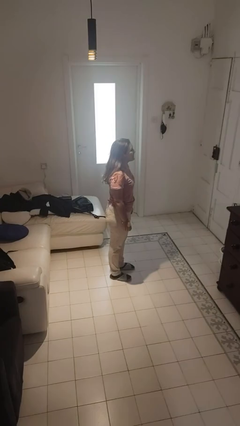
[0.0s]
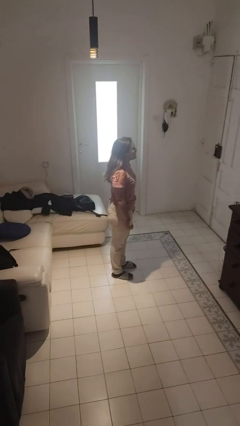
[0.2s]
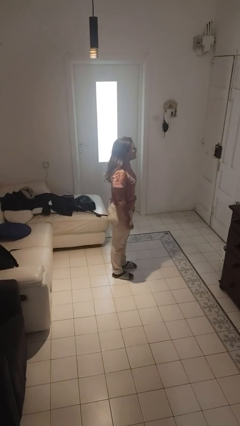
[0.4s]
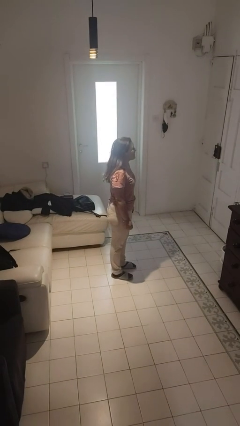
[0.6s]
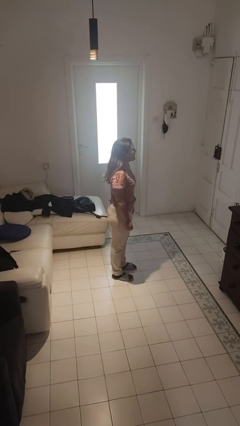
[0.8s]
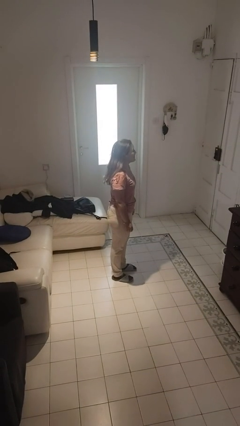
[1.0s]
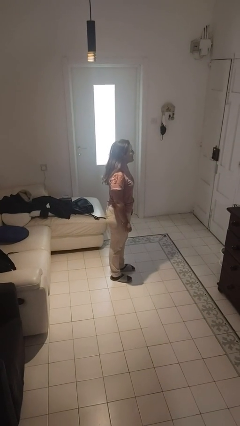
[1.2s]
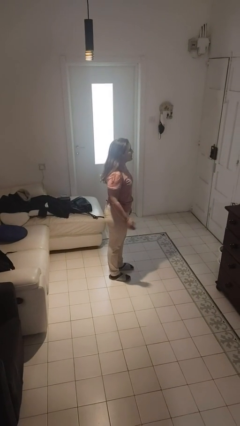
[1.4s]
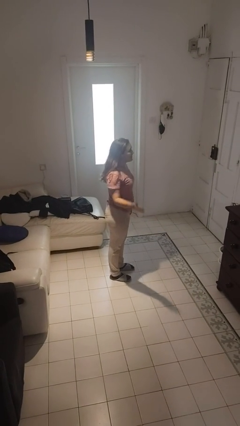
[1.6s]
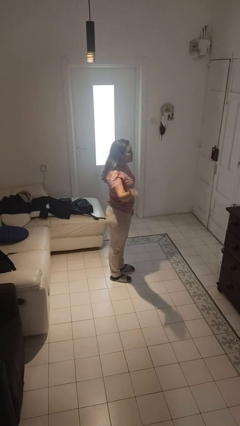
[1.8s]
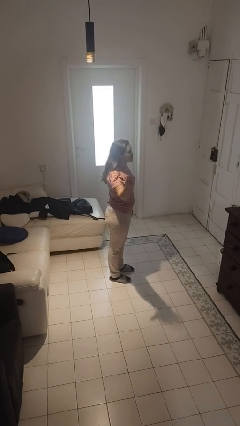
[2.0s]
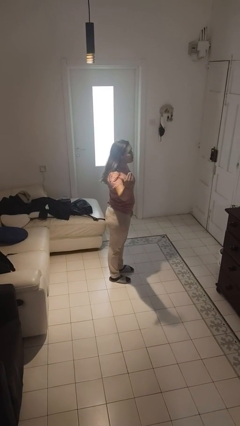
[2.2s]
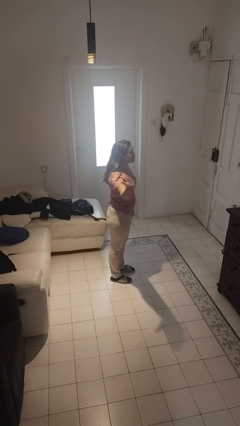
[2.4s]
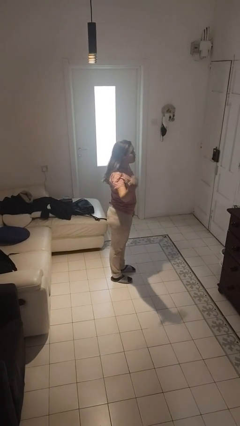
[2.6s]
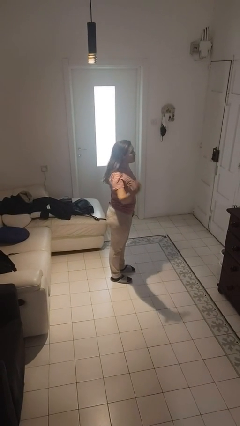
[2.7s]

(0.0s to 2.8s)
person gestures come here

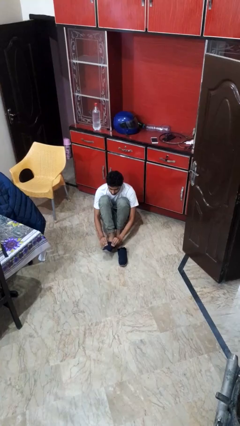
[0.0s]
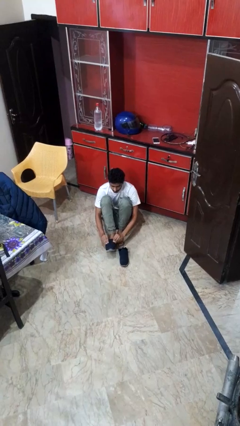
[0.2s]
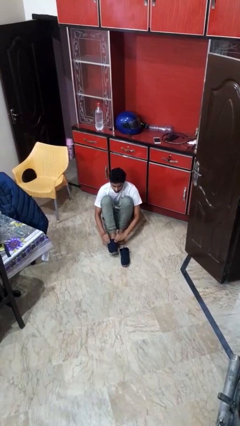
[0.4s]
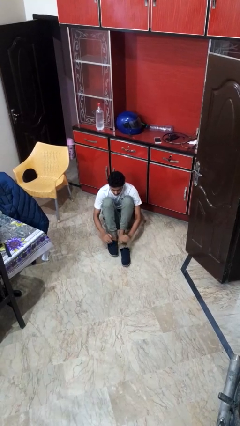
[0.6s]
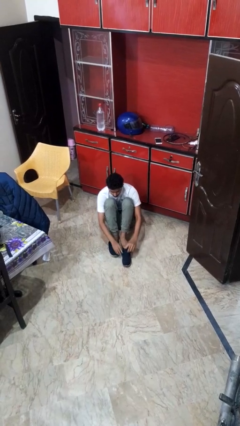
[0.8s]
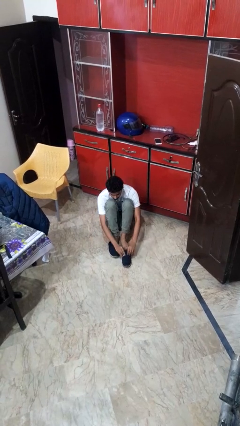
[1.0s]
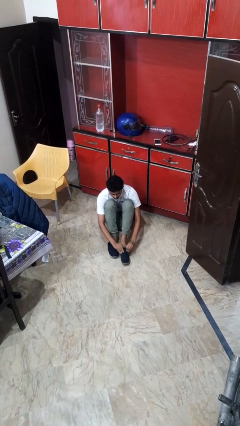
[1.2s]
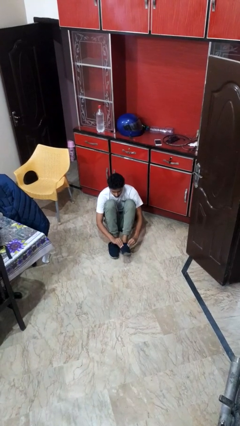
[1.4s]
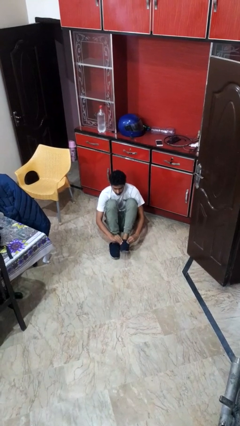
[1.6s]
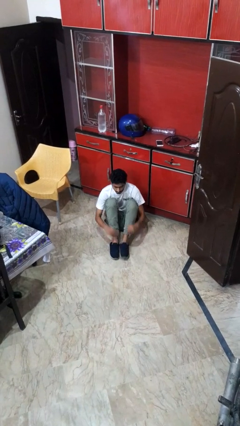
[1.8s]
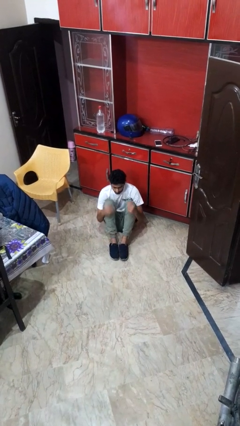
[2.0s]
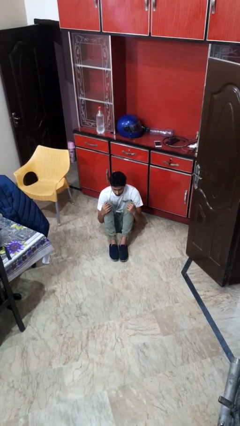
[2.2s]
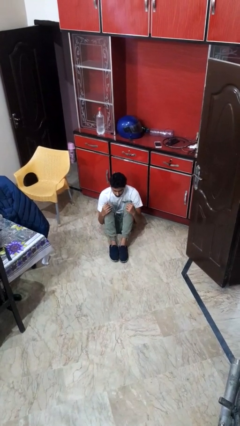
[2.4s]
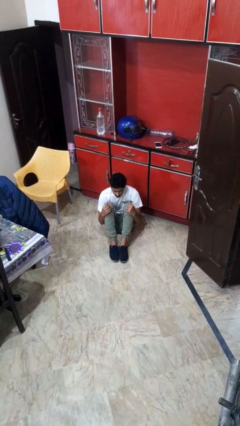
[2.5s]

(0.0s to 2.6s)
person puts on shoes

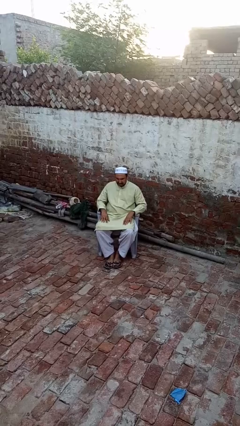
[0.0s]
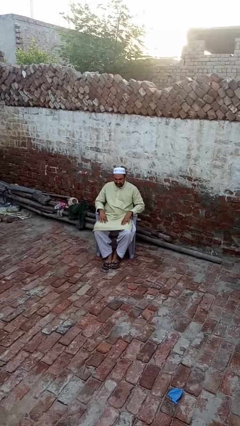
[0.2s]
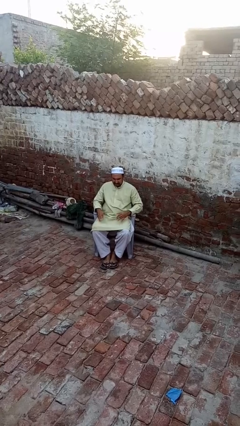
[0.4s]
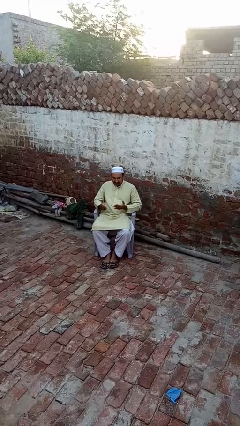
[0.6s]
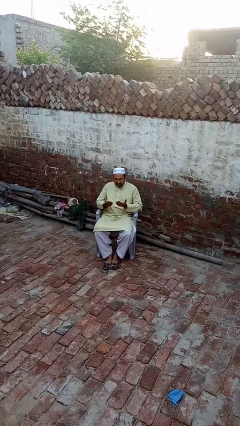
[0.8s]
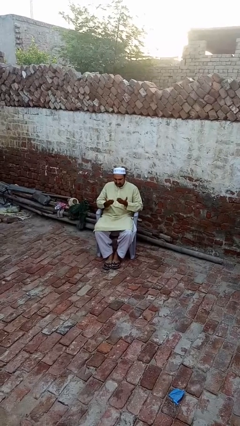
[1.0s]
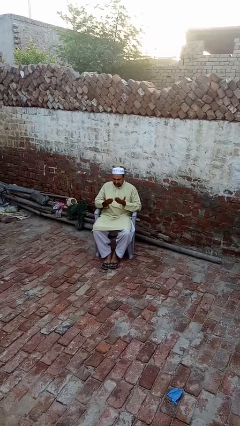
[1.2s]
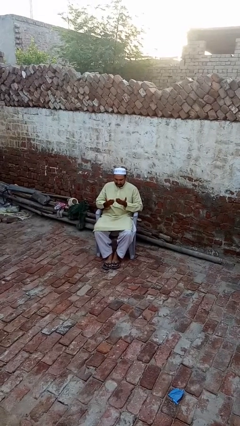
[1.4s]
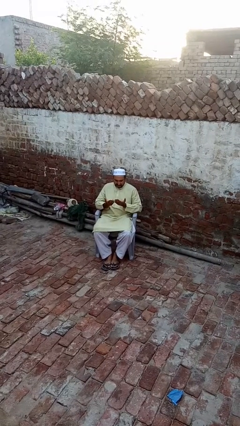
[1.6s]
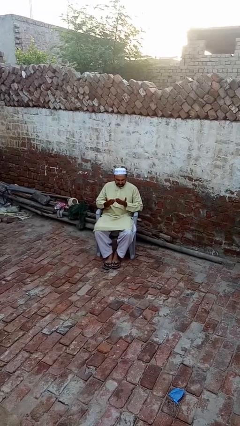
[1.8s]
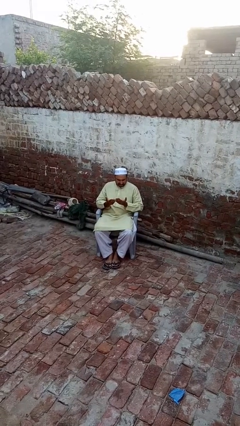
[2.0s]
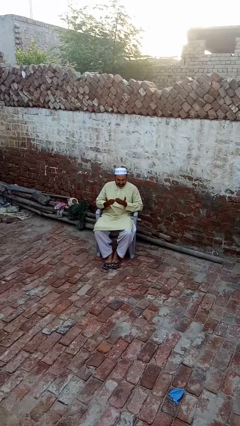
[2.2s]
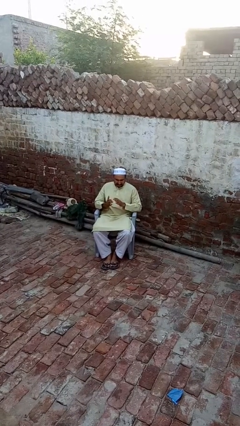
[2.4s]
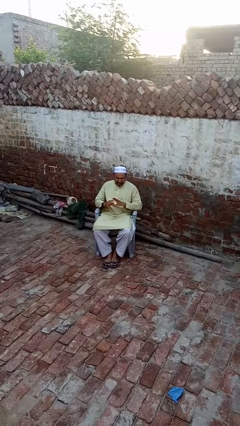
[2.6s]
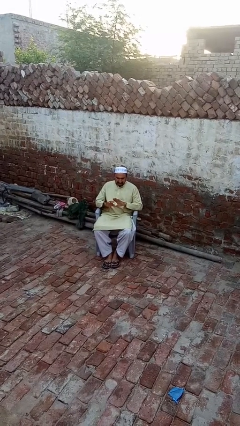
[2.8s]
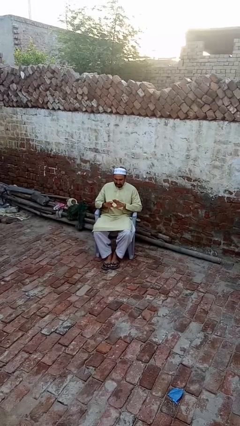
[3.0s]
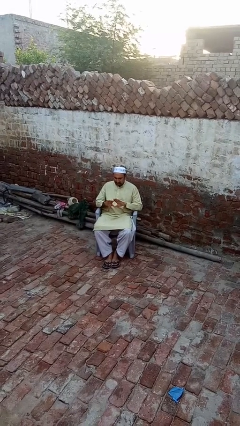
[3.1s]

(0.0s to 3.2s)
person looks at hands in lap

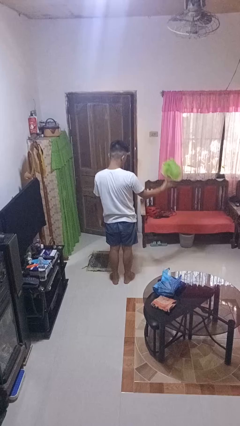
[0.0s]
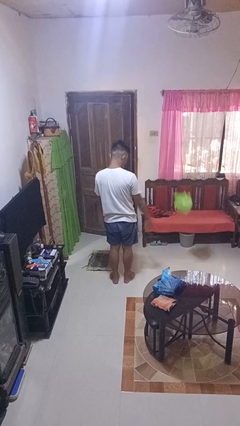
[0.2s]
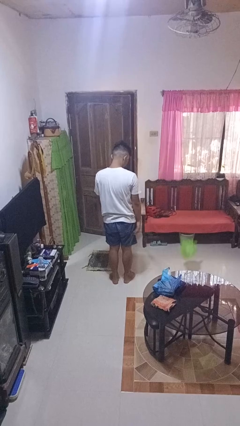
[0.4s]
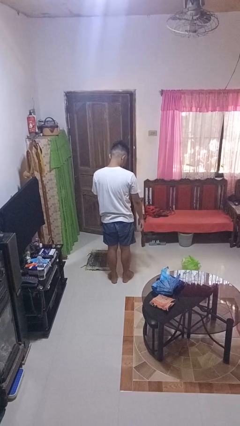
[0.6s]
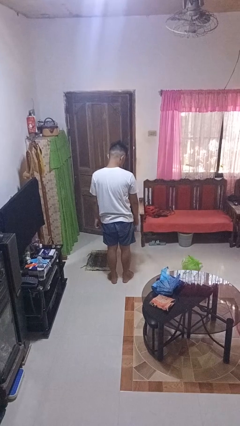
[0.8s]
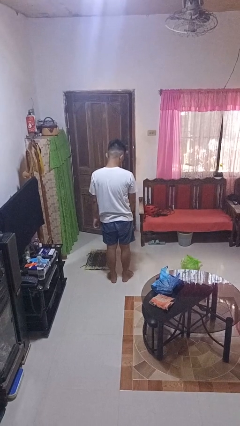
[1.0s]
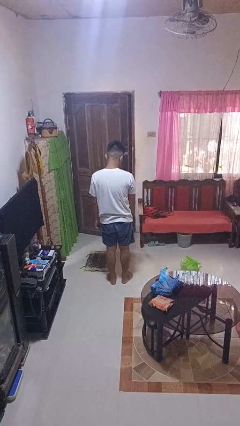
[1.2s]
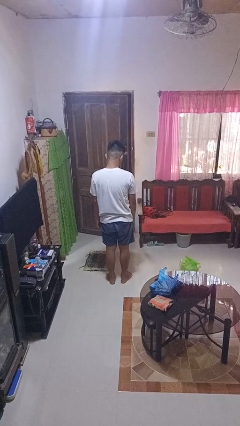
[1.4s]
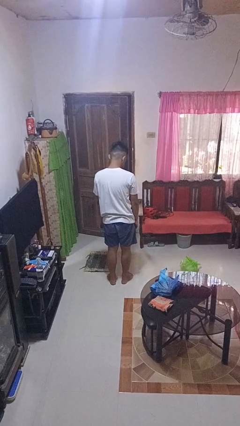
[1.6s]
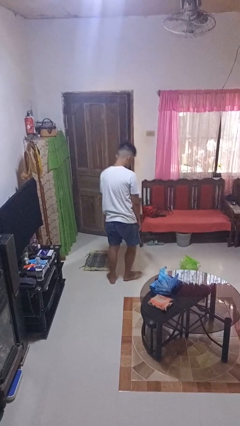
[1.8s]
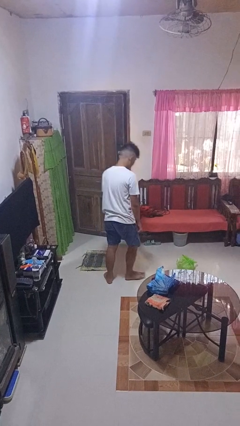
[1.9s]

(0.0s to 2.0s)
person throws object to ground

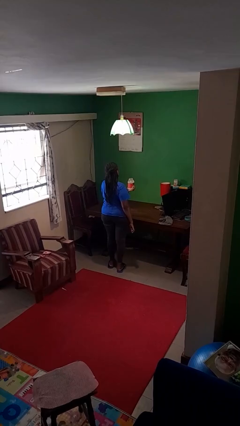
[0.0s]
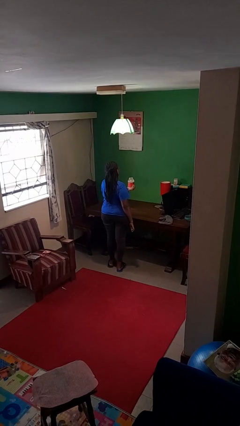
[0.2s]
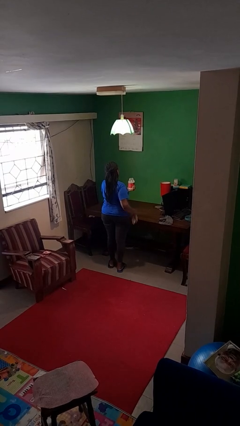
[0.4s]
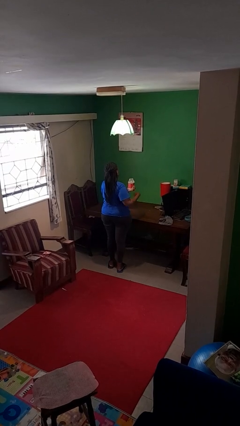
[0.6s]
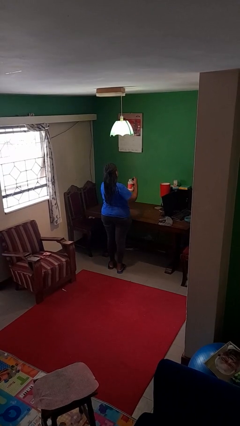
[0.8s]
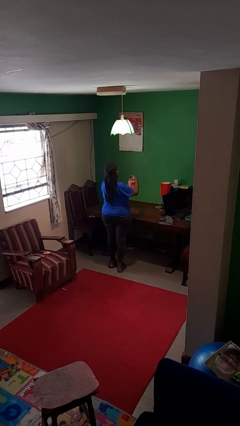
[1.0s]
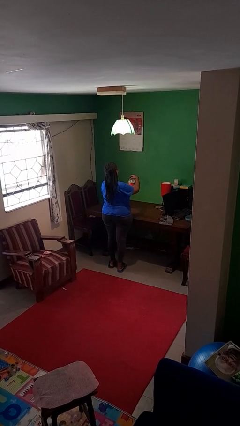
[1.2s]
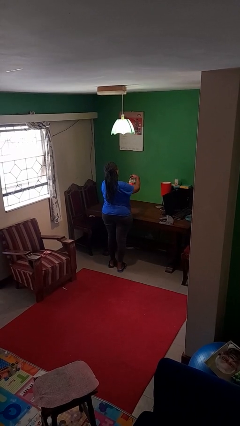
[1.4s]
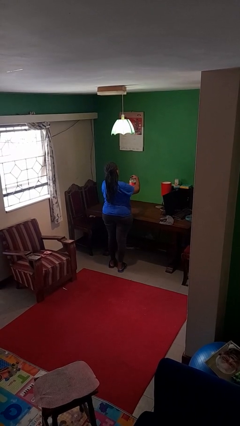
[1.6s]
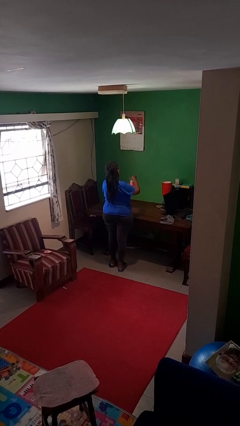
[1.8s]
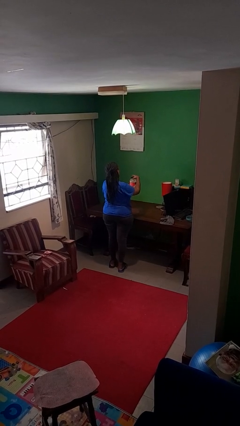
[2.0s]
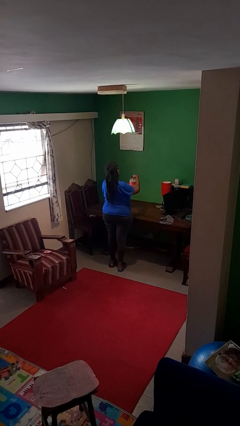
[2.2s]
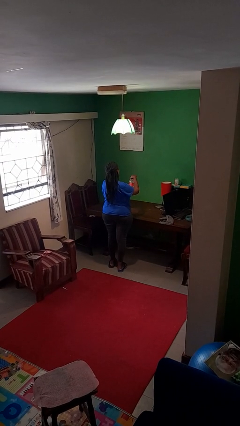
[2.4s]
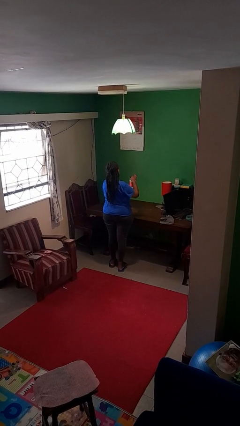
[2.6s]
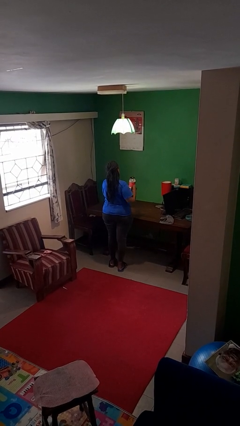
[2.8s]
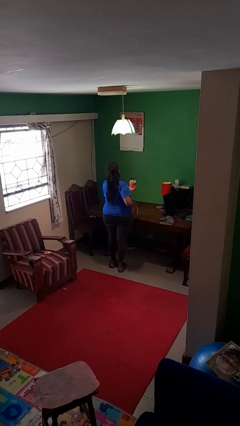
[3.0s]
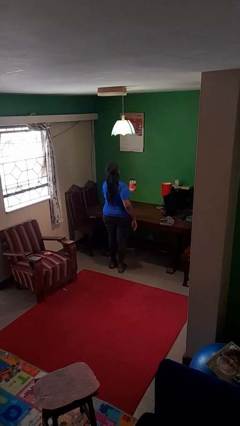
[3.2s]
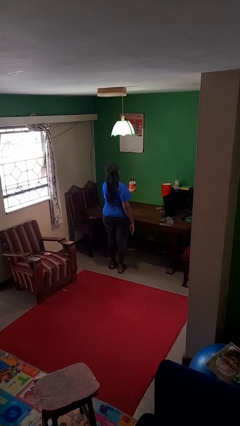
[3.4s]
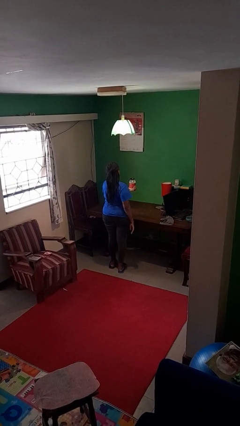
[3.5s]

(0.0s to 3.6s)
person closes jar

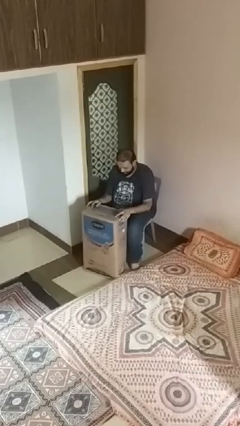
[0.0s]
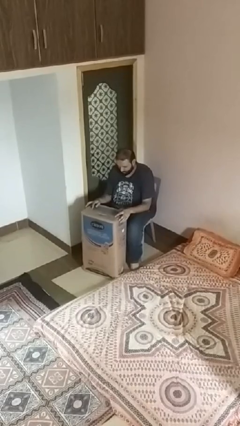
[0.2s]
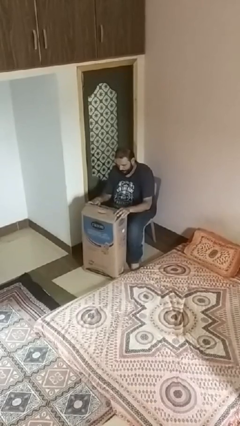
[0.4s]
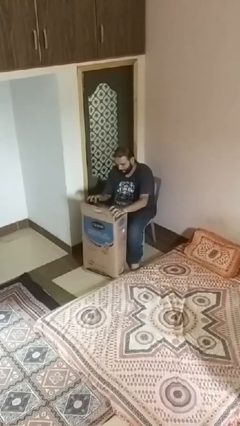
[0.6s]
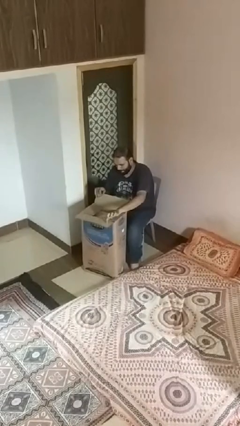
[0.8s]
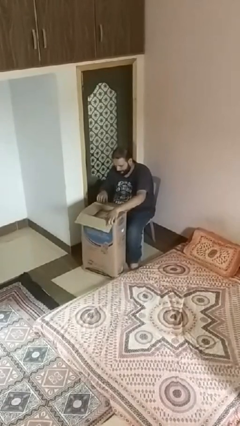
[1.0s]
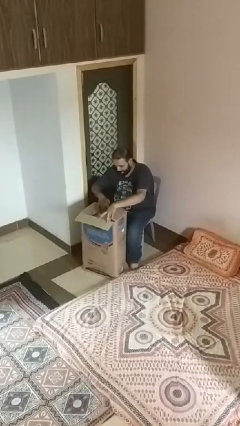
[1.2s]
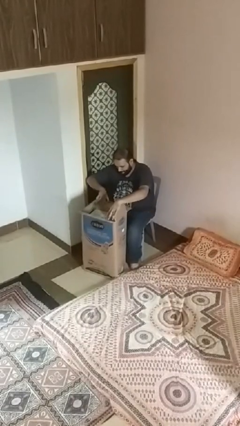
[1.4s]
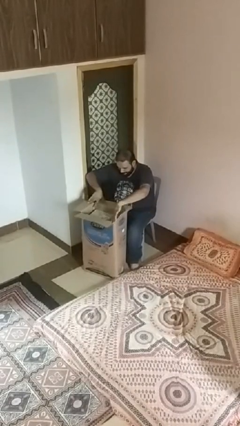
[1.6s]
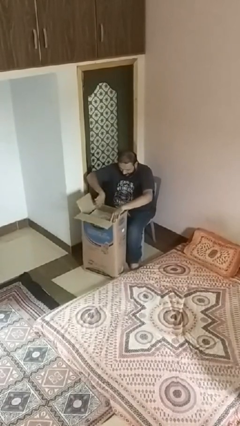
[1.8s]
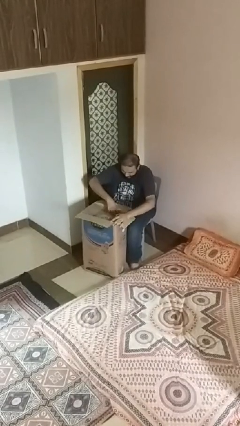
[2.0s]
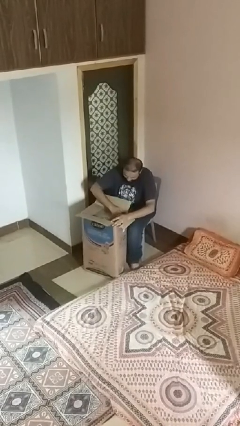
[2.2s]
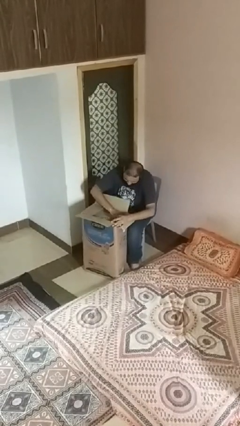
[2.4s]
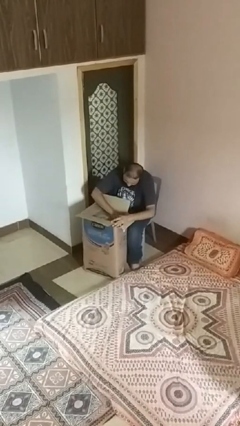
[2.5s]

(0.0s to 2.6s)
person searches in box

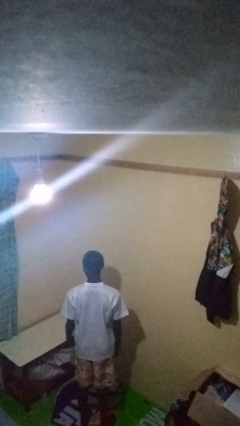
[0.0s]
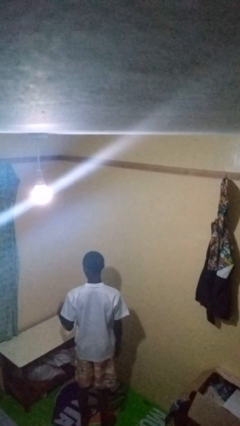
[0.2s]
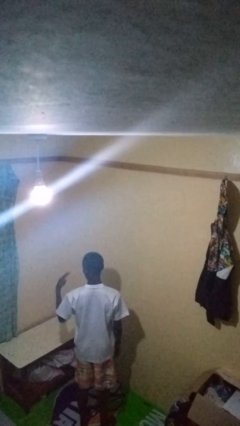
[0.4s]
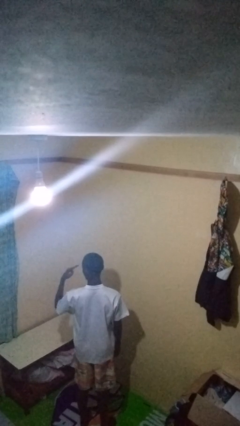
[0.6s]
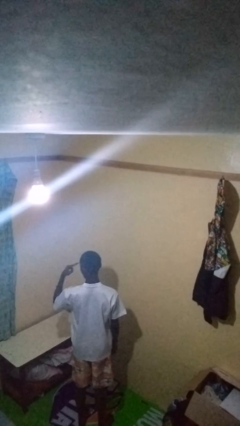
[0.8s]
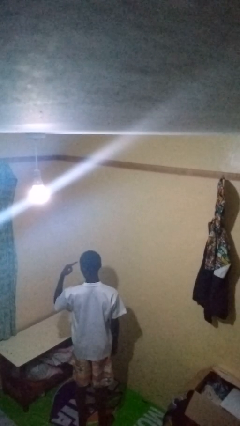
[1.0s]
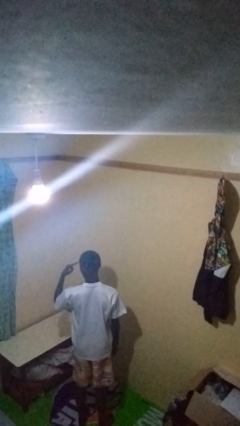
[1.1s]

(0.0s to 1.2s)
person gestures watch closely
